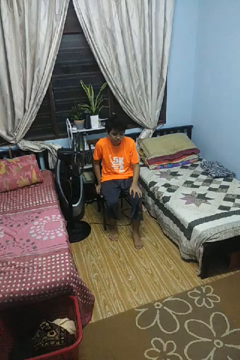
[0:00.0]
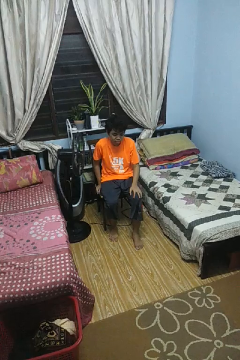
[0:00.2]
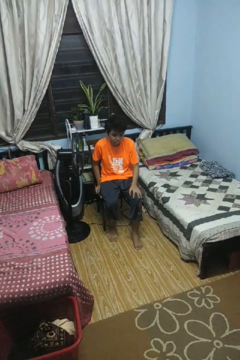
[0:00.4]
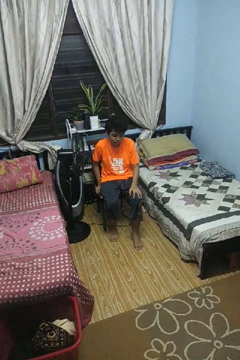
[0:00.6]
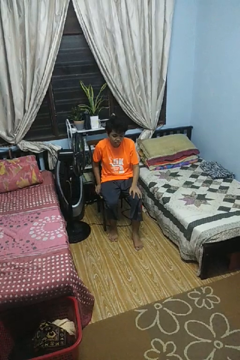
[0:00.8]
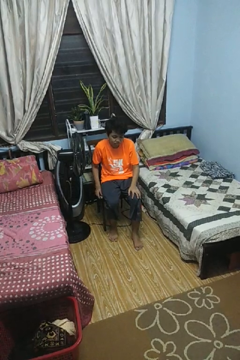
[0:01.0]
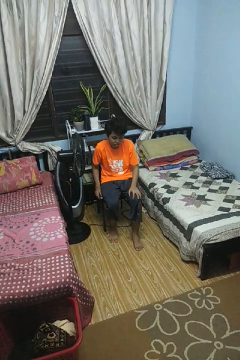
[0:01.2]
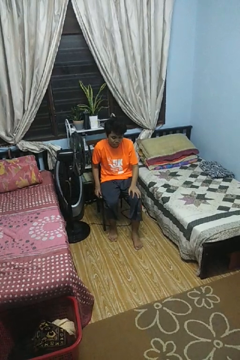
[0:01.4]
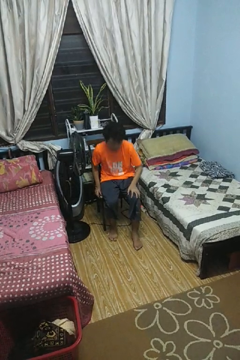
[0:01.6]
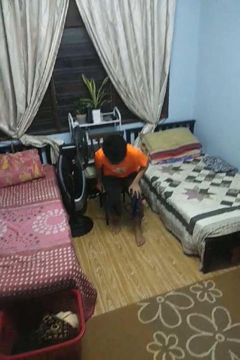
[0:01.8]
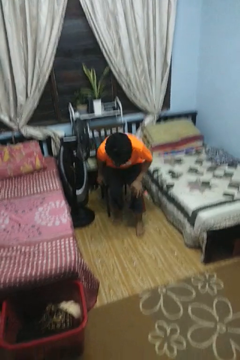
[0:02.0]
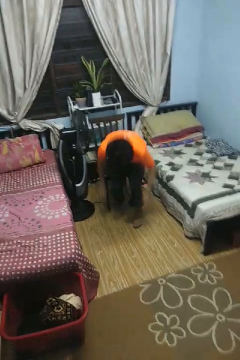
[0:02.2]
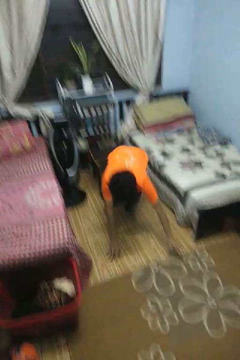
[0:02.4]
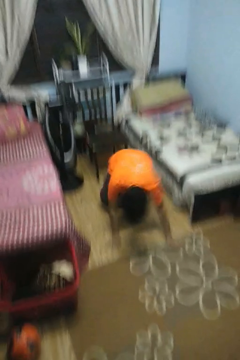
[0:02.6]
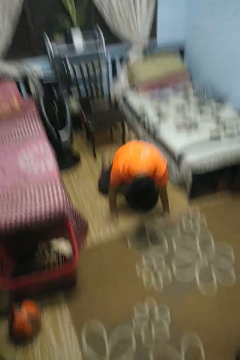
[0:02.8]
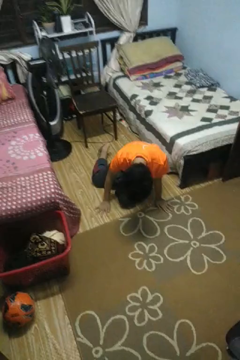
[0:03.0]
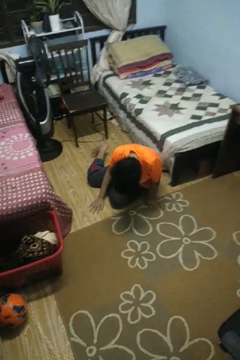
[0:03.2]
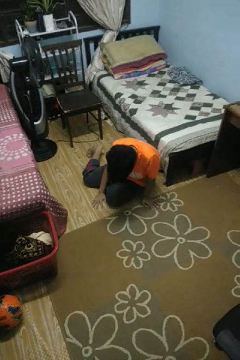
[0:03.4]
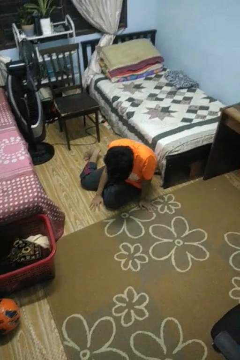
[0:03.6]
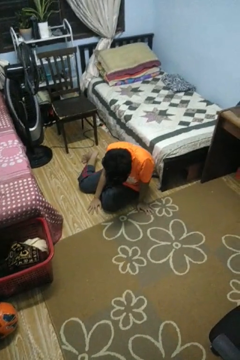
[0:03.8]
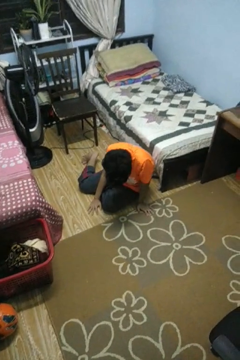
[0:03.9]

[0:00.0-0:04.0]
person falls from chair

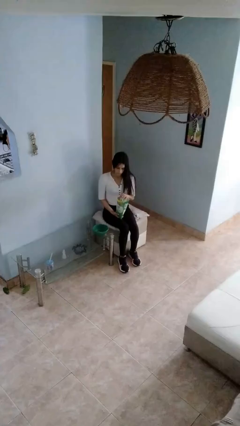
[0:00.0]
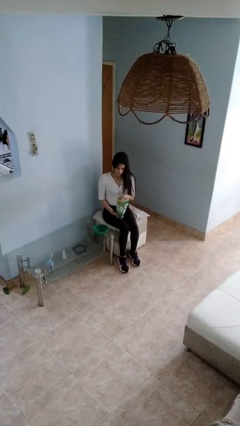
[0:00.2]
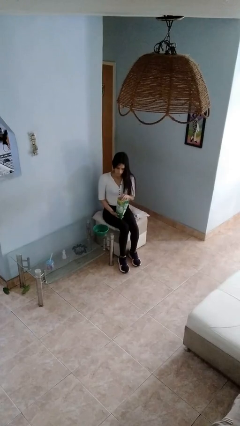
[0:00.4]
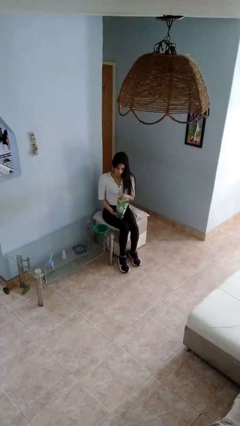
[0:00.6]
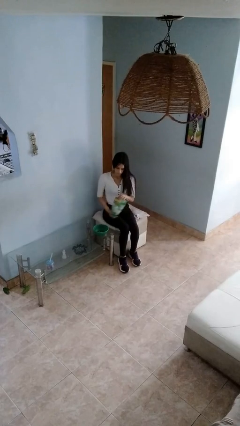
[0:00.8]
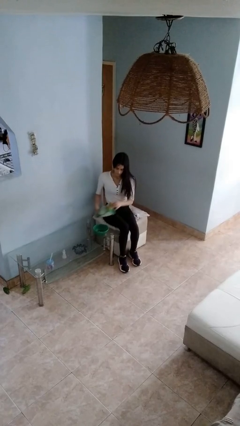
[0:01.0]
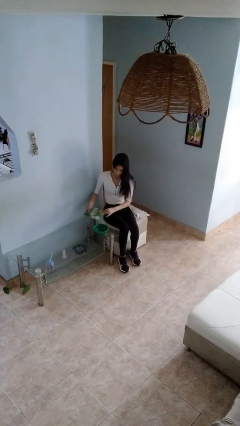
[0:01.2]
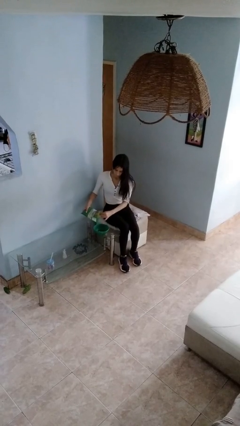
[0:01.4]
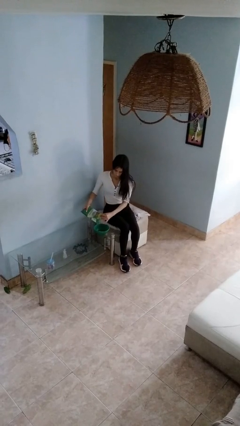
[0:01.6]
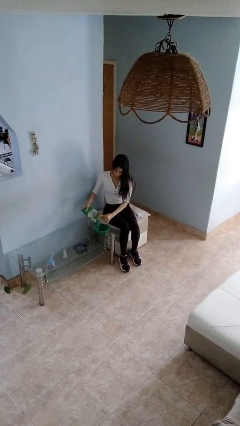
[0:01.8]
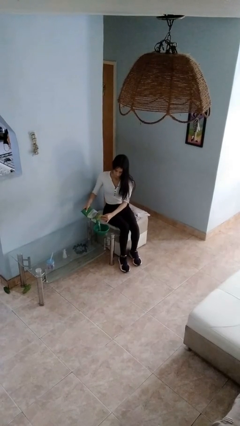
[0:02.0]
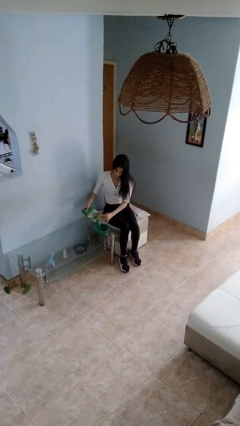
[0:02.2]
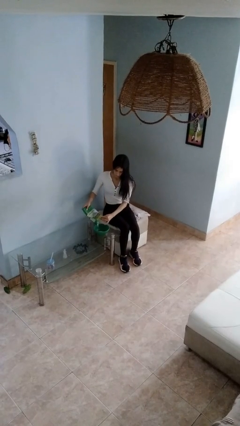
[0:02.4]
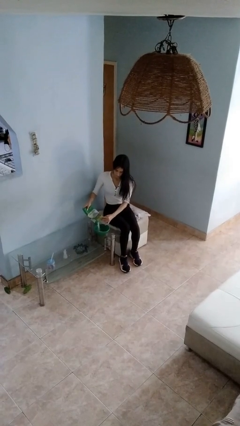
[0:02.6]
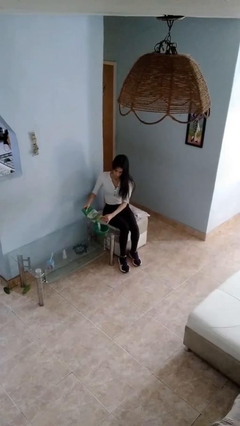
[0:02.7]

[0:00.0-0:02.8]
person pours into bowl

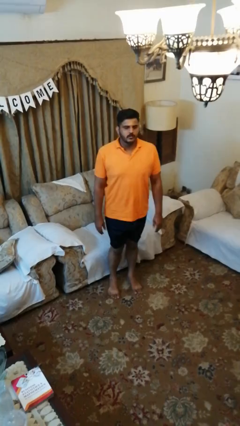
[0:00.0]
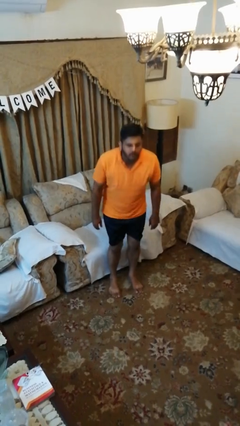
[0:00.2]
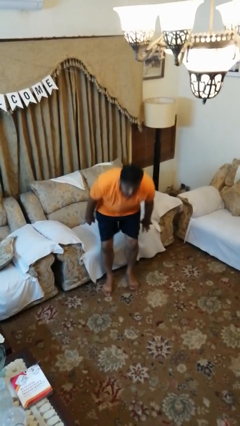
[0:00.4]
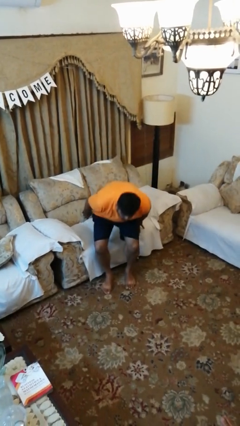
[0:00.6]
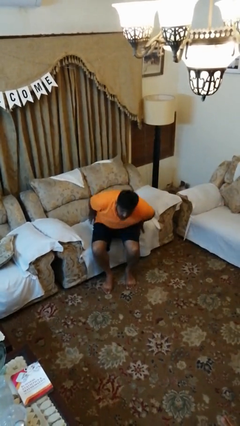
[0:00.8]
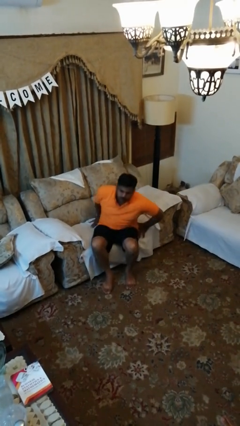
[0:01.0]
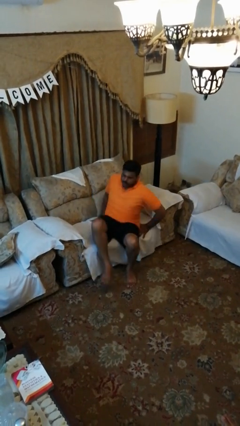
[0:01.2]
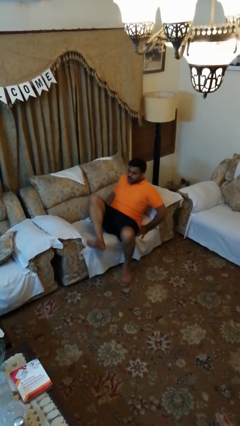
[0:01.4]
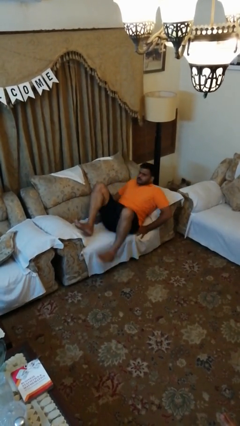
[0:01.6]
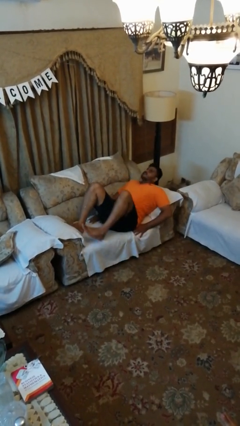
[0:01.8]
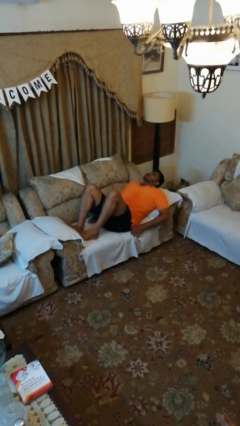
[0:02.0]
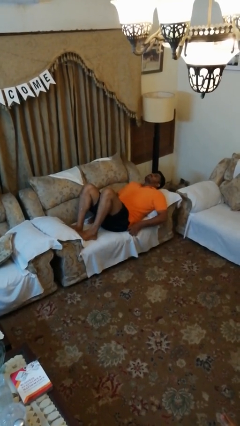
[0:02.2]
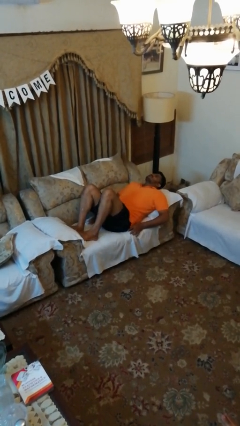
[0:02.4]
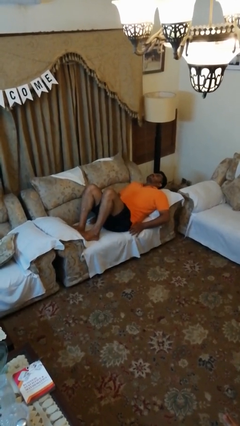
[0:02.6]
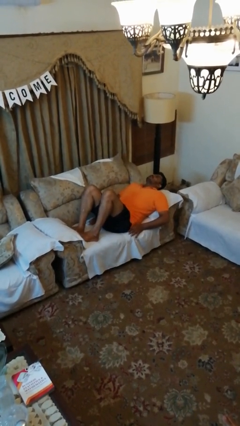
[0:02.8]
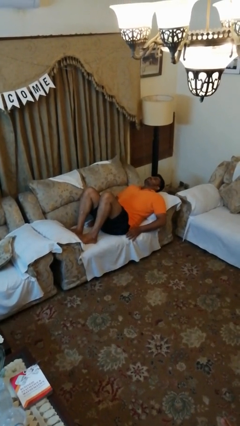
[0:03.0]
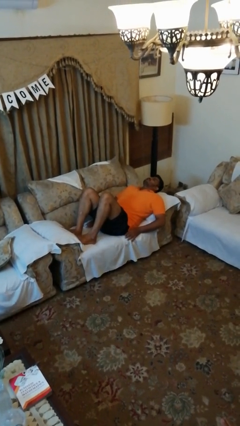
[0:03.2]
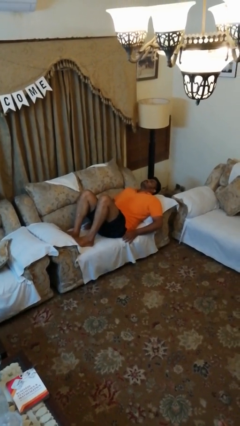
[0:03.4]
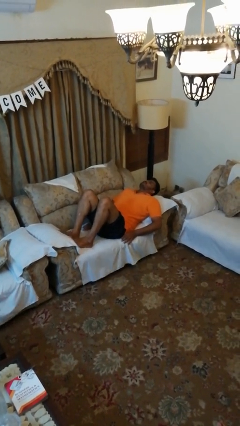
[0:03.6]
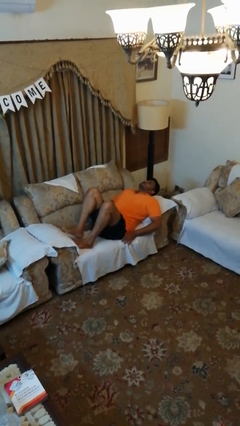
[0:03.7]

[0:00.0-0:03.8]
person lies down on couch

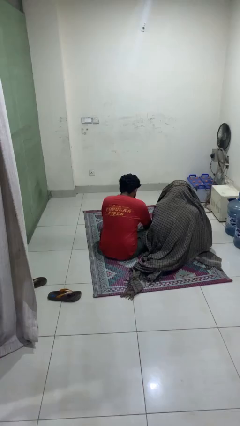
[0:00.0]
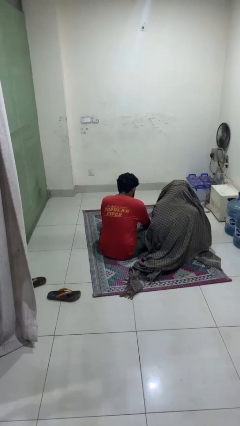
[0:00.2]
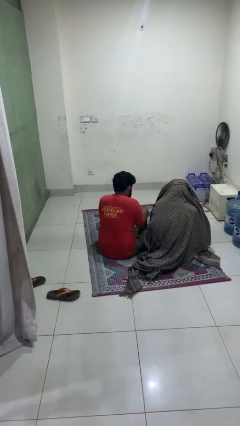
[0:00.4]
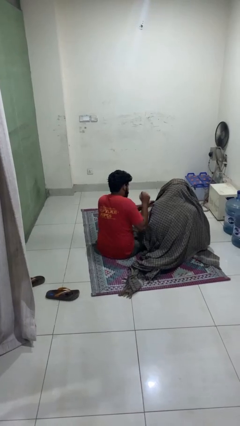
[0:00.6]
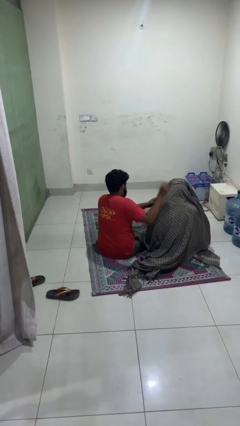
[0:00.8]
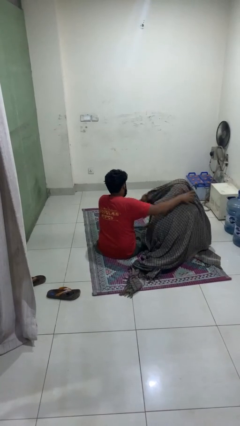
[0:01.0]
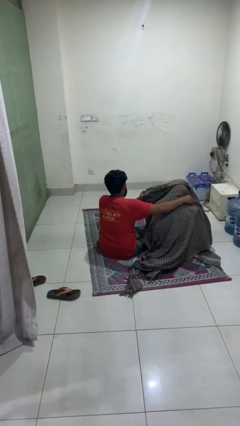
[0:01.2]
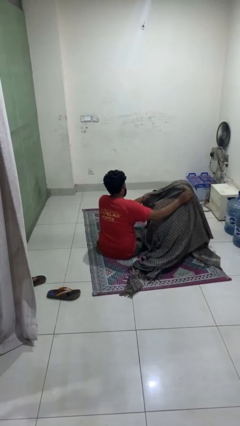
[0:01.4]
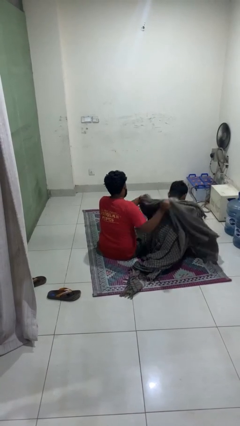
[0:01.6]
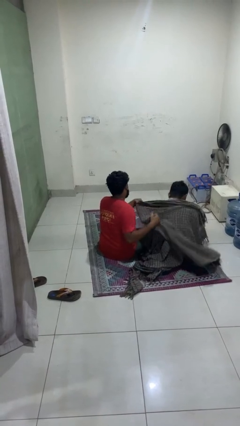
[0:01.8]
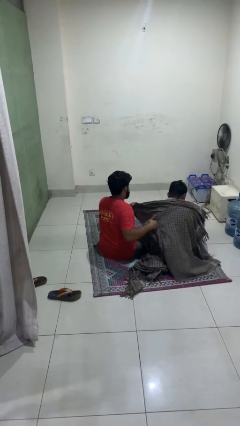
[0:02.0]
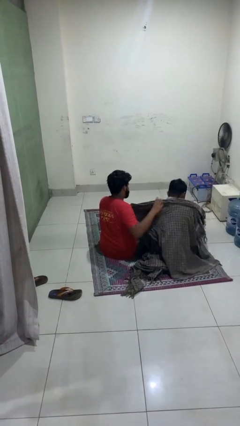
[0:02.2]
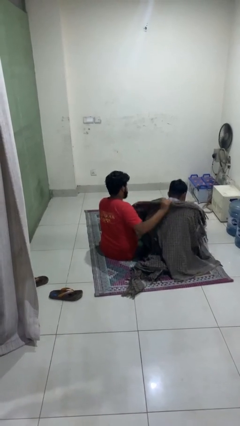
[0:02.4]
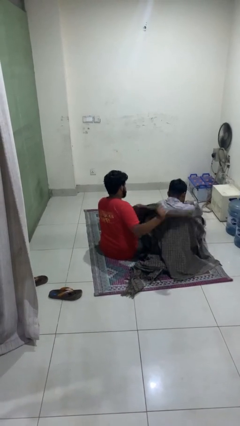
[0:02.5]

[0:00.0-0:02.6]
person uncovers friend with blanket

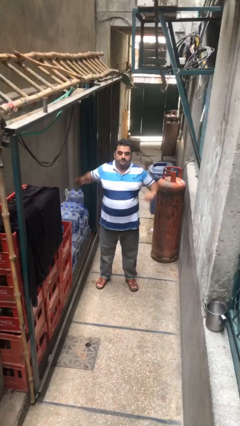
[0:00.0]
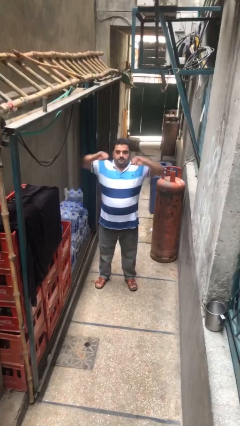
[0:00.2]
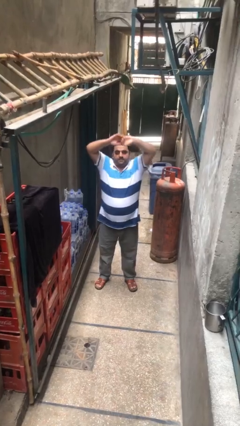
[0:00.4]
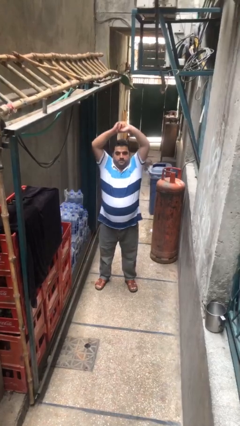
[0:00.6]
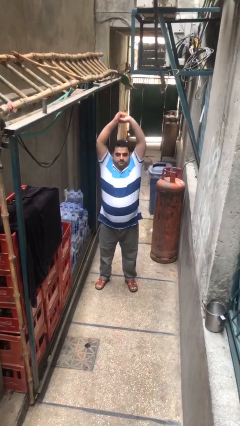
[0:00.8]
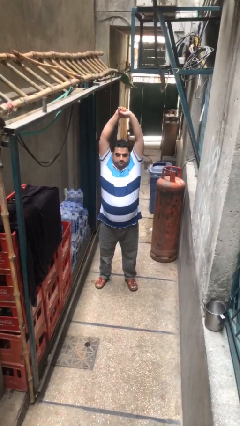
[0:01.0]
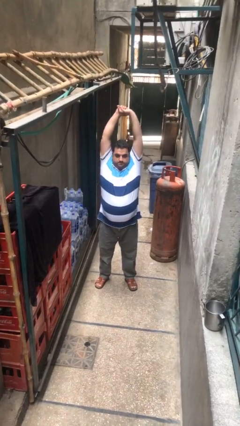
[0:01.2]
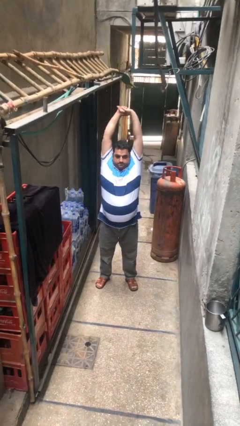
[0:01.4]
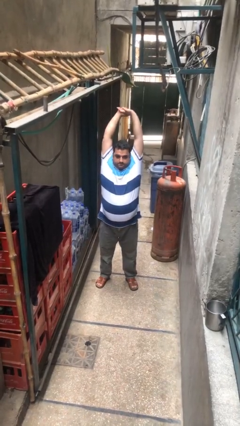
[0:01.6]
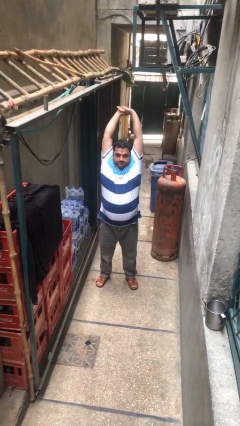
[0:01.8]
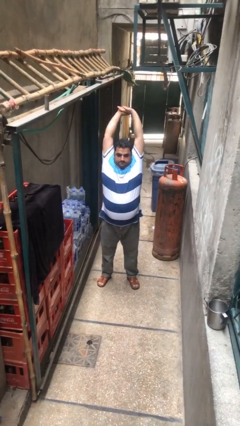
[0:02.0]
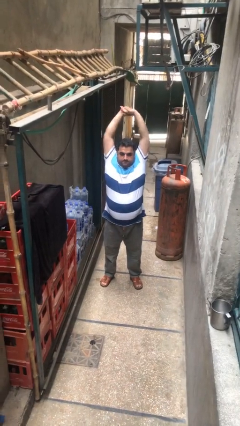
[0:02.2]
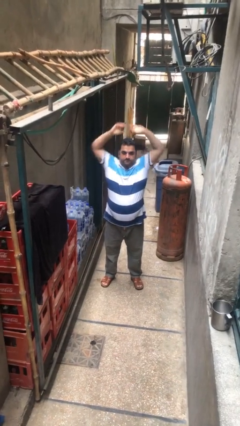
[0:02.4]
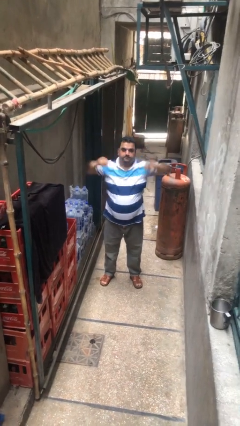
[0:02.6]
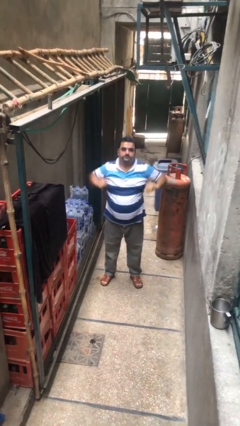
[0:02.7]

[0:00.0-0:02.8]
person stretches arms over head

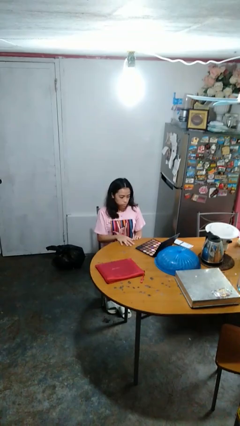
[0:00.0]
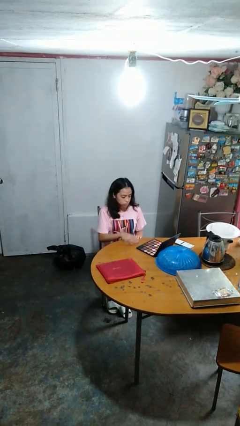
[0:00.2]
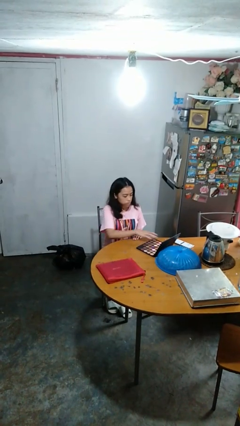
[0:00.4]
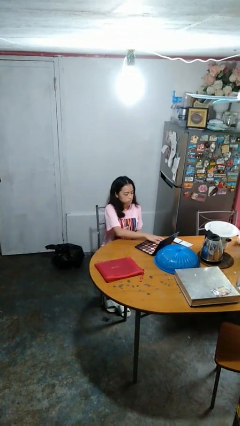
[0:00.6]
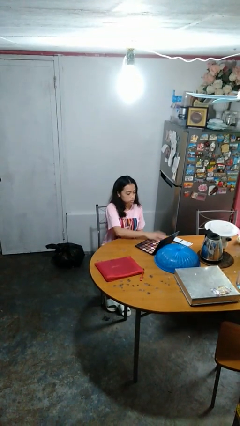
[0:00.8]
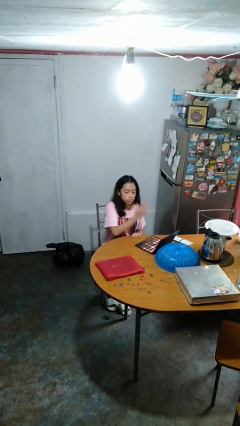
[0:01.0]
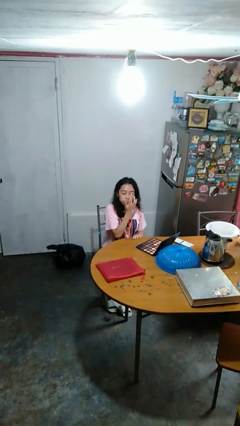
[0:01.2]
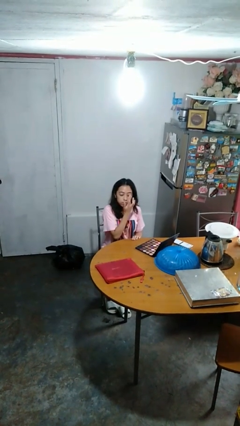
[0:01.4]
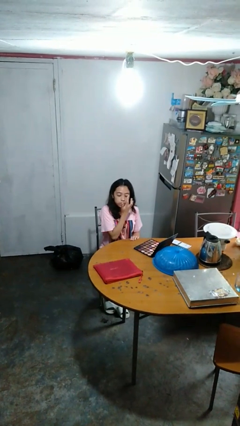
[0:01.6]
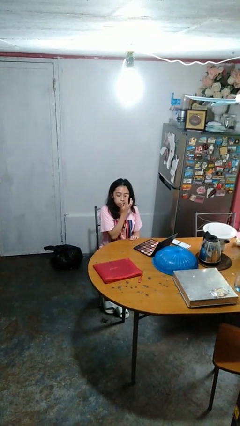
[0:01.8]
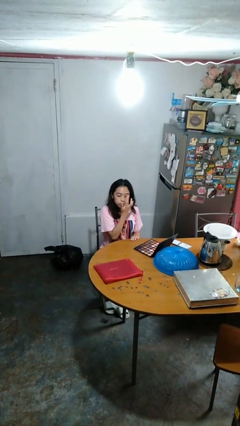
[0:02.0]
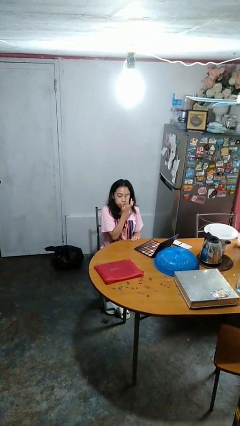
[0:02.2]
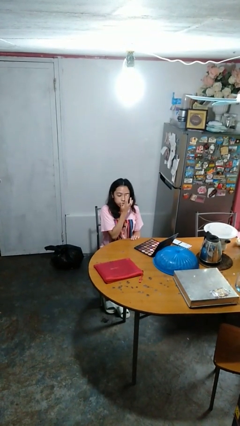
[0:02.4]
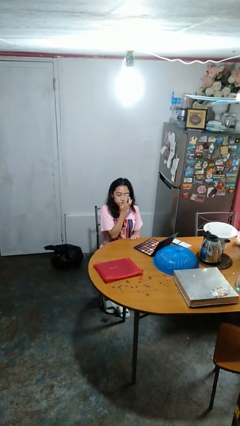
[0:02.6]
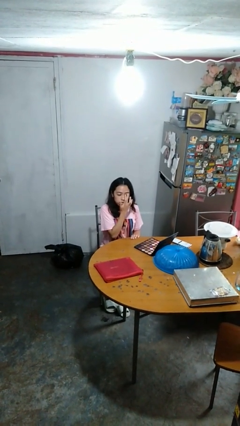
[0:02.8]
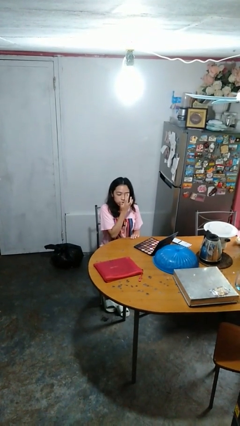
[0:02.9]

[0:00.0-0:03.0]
person applies eye makeup
